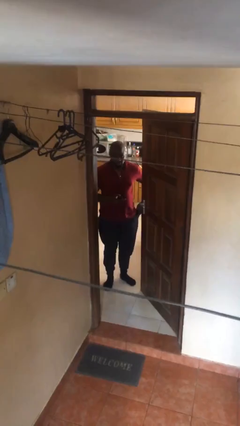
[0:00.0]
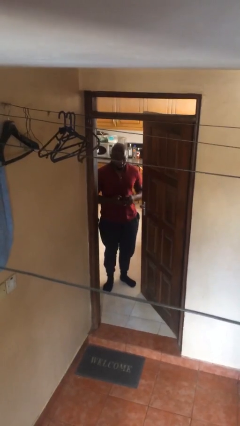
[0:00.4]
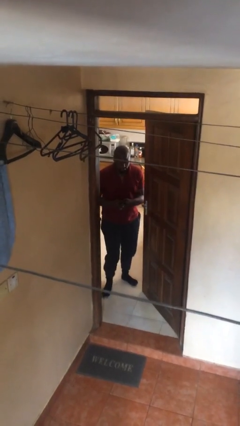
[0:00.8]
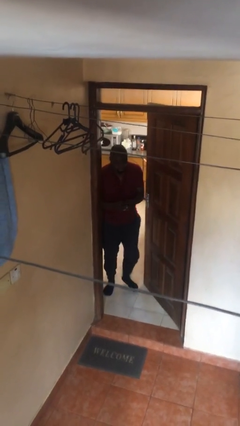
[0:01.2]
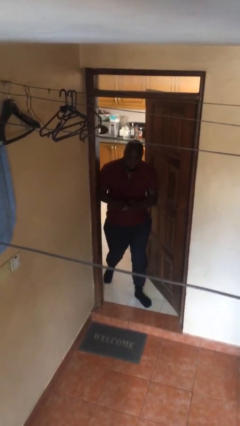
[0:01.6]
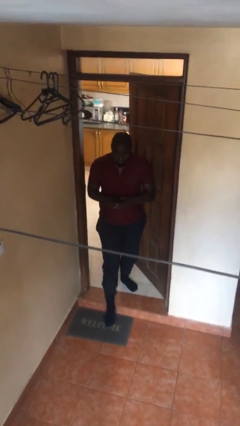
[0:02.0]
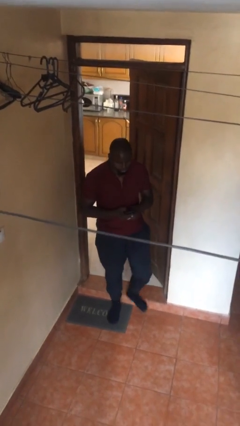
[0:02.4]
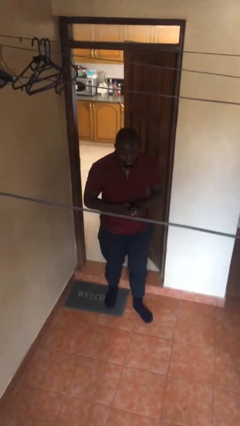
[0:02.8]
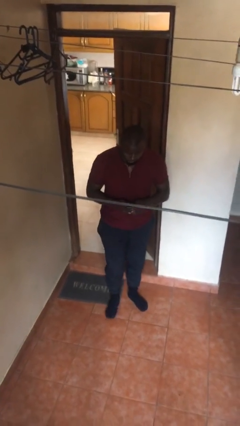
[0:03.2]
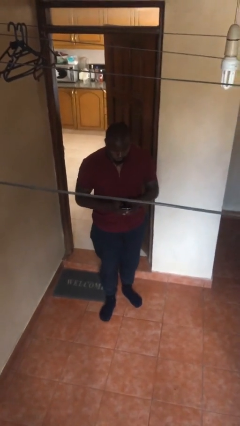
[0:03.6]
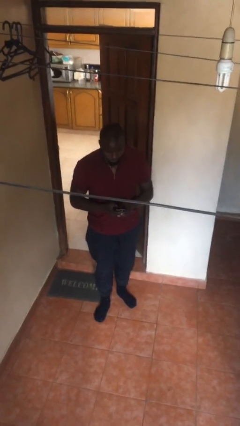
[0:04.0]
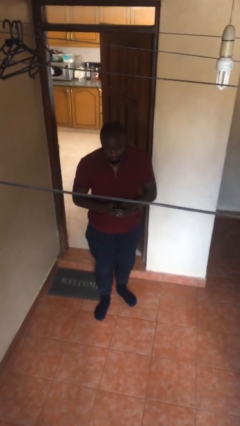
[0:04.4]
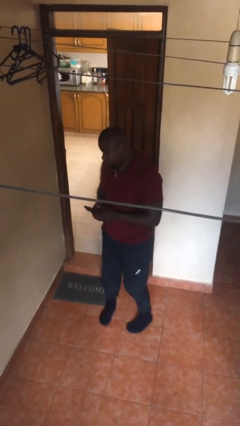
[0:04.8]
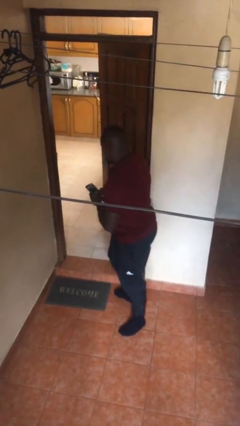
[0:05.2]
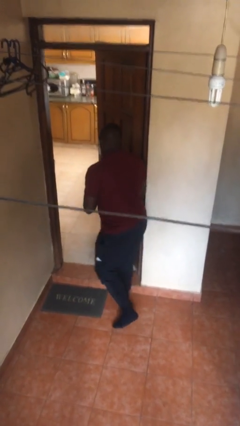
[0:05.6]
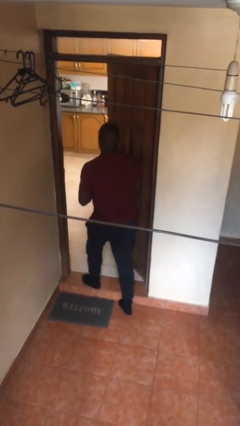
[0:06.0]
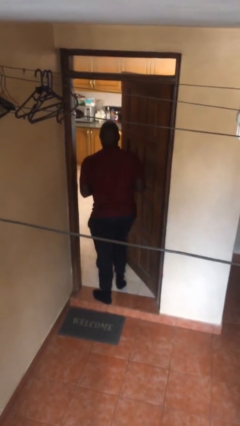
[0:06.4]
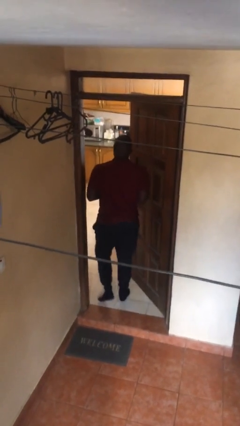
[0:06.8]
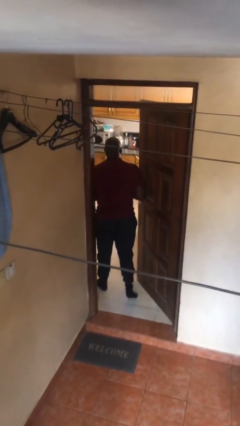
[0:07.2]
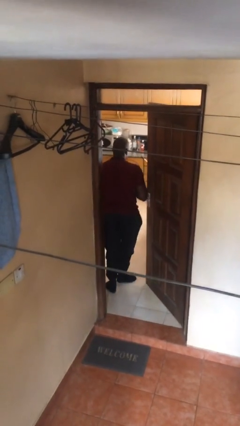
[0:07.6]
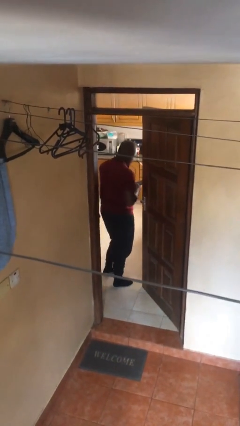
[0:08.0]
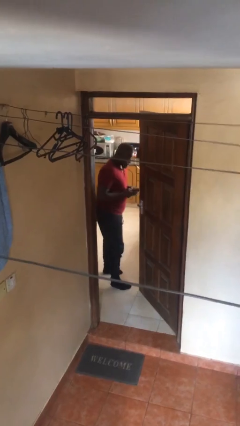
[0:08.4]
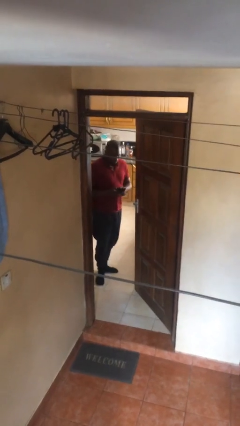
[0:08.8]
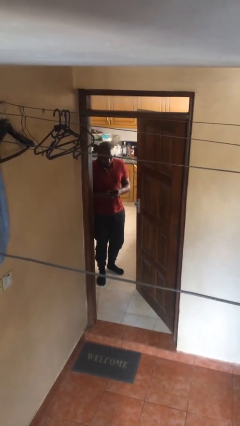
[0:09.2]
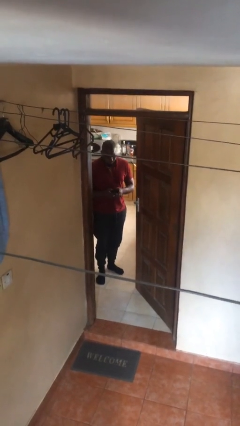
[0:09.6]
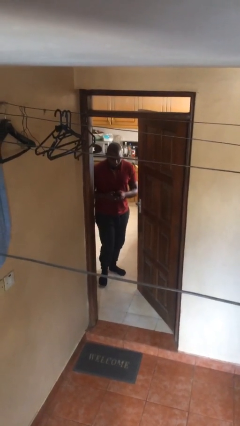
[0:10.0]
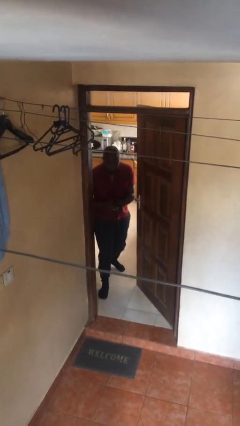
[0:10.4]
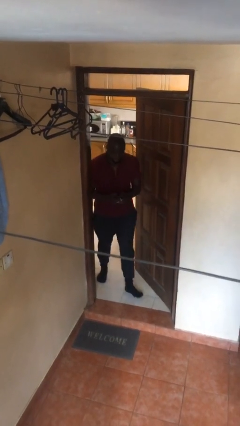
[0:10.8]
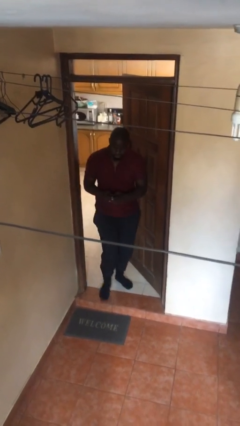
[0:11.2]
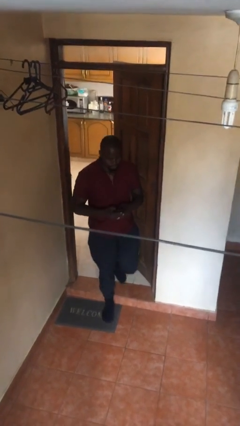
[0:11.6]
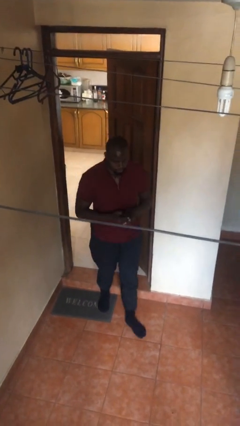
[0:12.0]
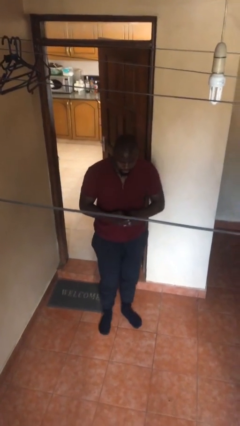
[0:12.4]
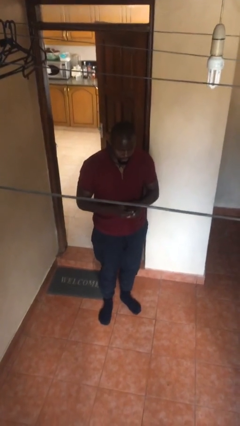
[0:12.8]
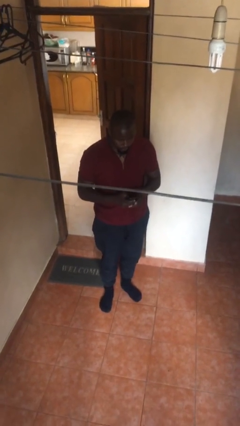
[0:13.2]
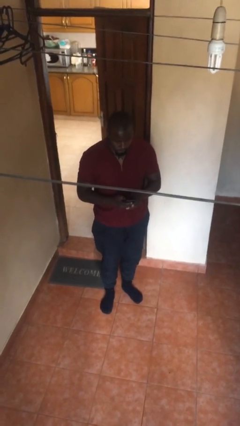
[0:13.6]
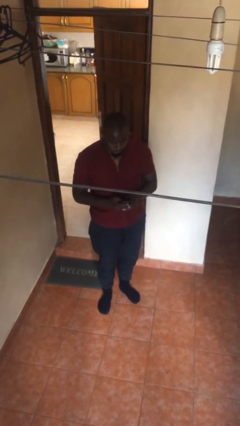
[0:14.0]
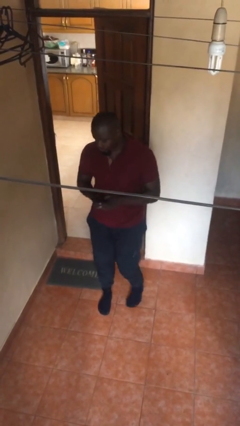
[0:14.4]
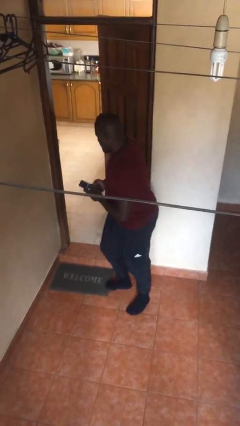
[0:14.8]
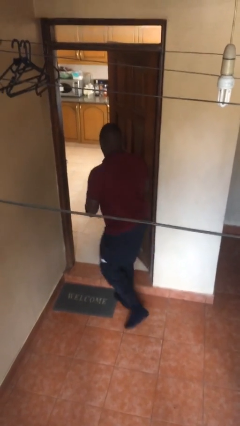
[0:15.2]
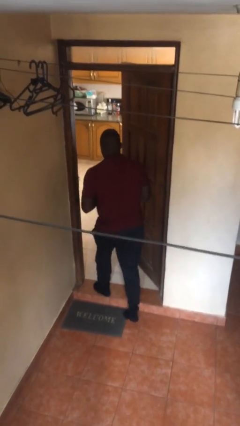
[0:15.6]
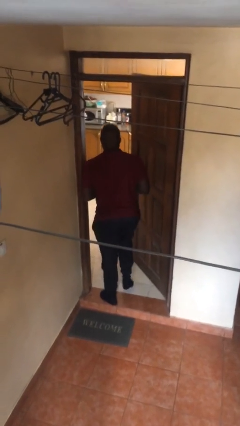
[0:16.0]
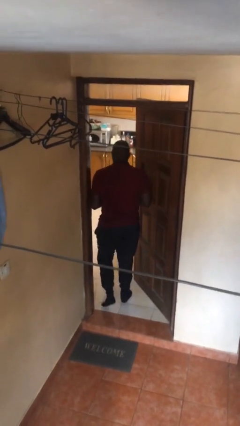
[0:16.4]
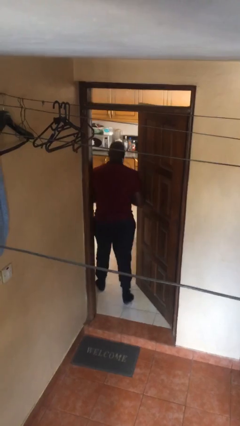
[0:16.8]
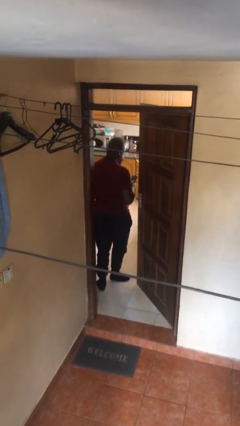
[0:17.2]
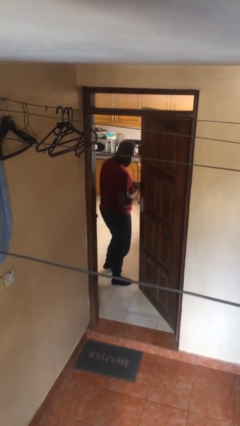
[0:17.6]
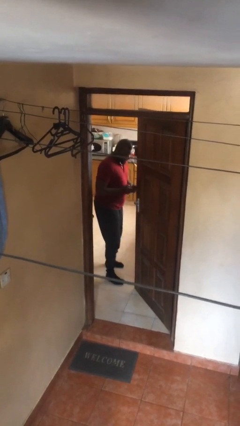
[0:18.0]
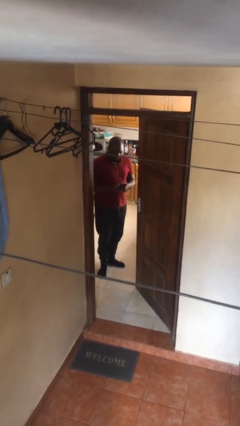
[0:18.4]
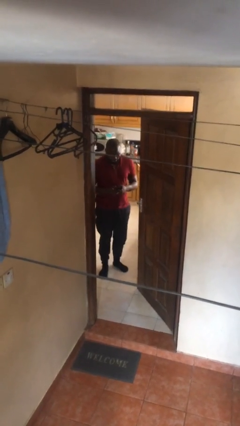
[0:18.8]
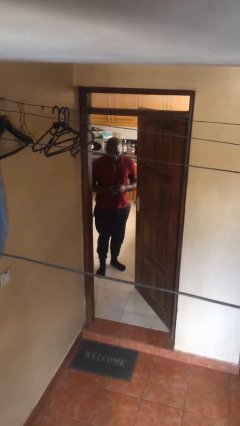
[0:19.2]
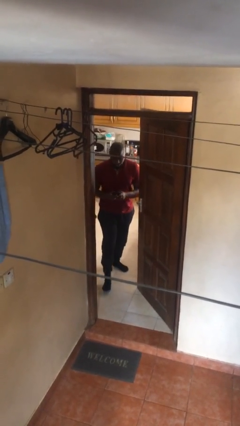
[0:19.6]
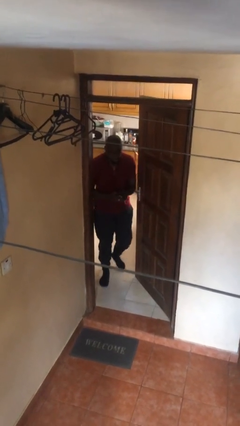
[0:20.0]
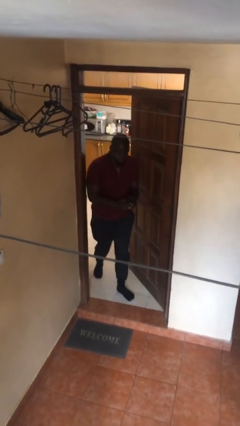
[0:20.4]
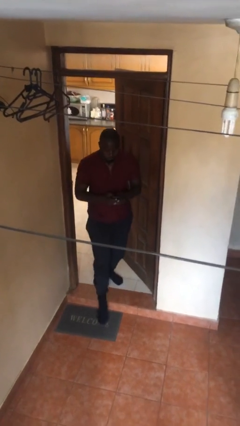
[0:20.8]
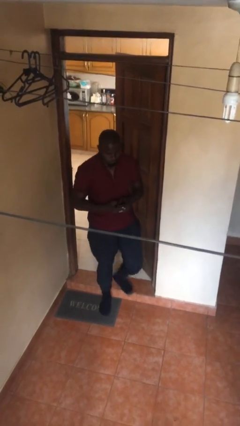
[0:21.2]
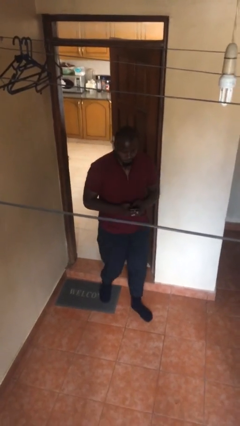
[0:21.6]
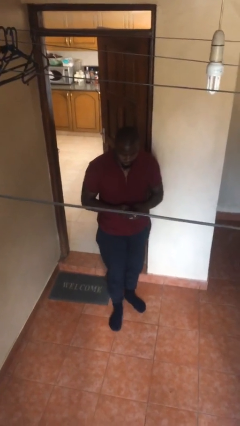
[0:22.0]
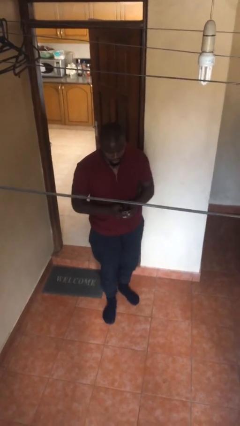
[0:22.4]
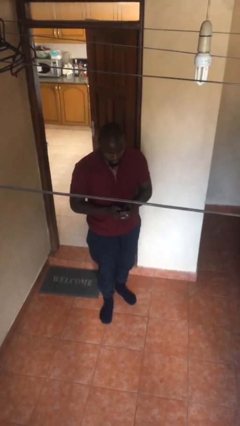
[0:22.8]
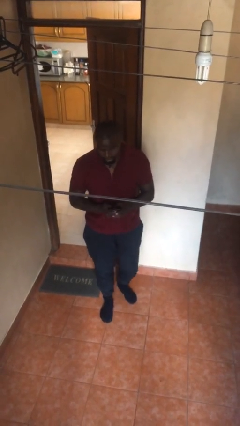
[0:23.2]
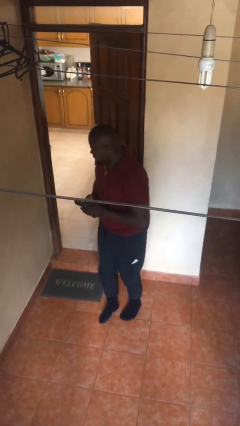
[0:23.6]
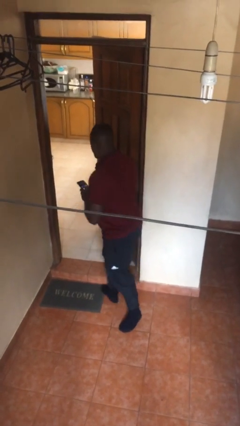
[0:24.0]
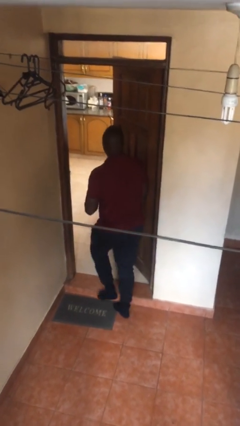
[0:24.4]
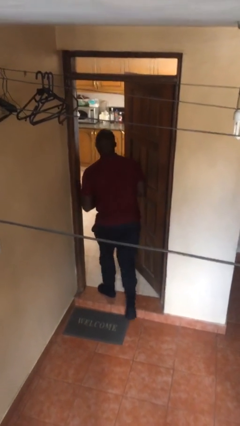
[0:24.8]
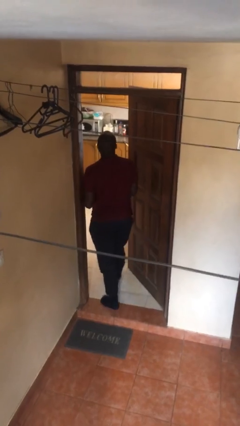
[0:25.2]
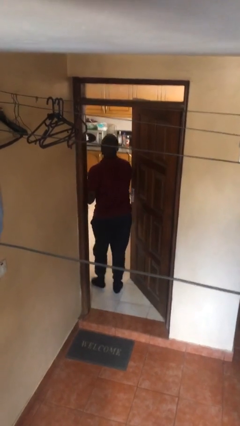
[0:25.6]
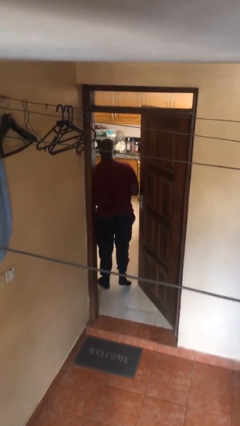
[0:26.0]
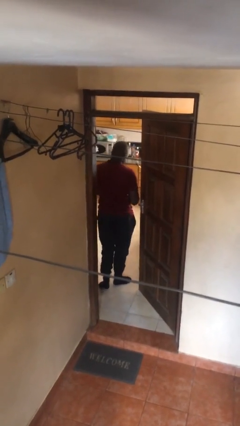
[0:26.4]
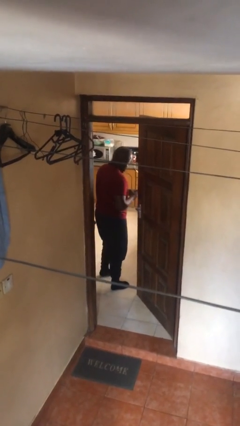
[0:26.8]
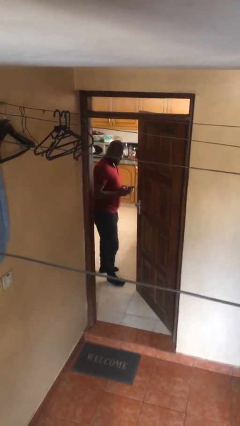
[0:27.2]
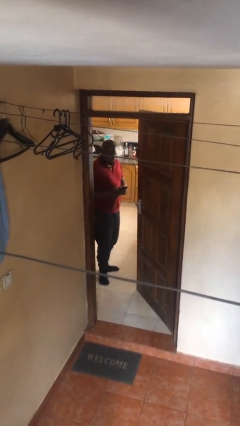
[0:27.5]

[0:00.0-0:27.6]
person texts on phone

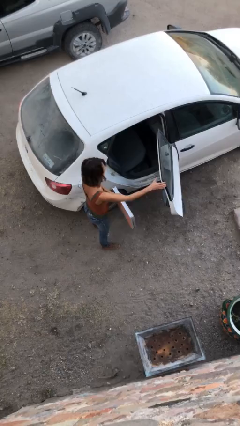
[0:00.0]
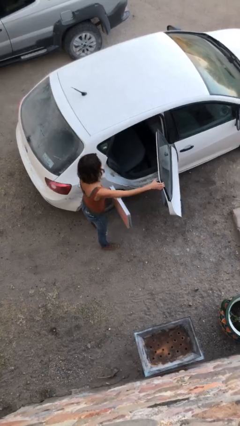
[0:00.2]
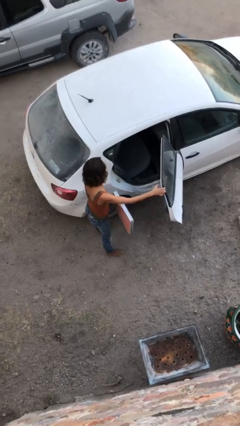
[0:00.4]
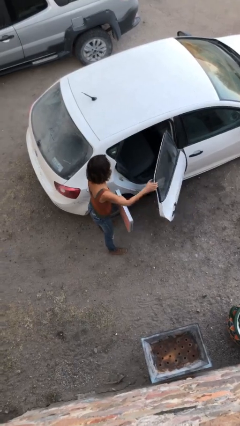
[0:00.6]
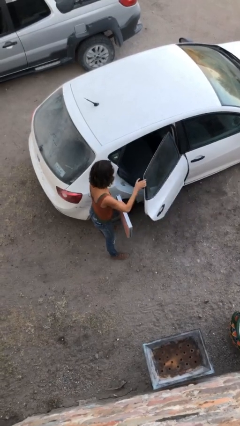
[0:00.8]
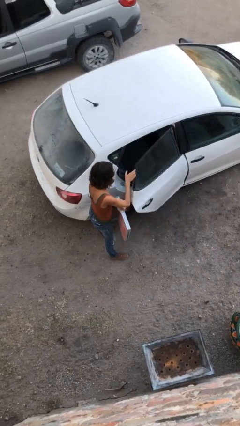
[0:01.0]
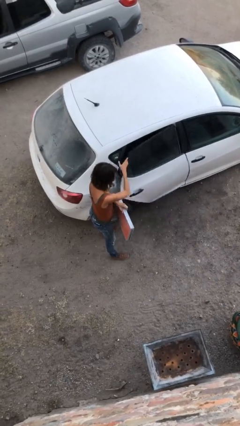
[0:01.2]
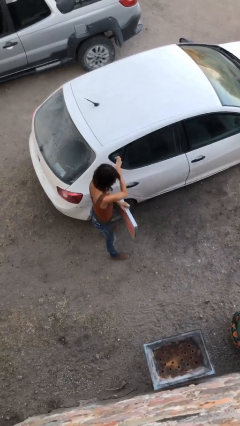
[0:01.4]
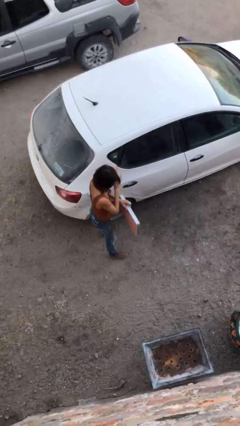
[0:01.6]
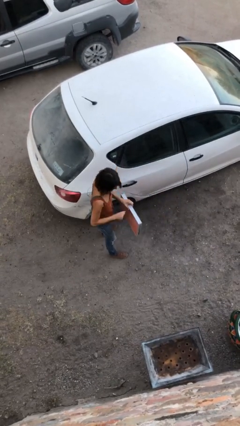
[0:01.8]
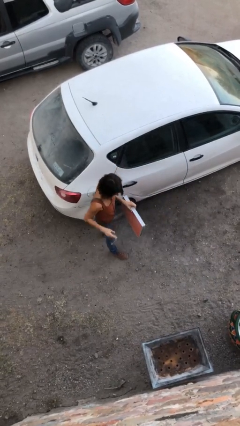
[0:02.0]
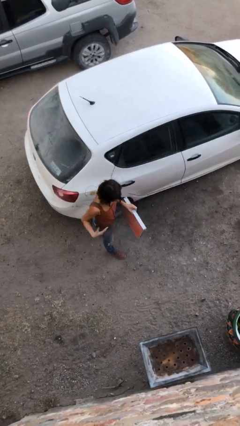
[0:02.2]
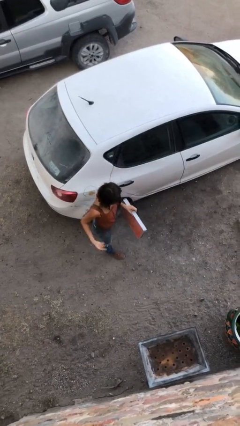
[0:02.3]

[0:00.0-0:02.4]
person closes car door

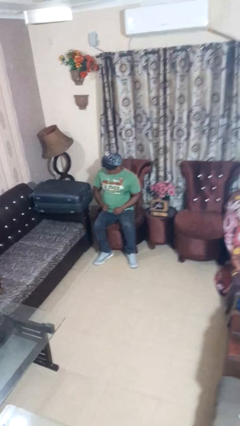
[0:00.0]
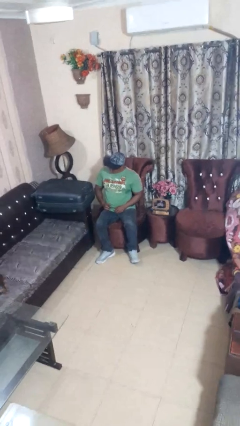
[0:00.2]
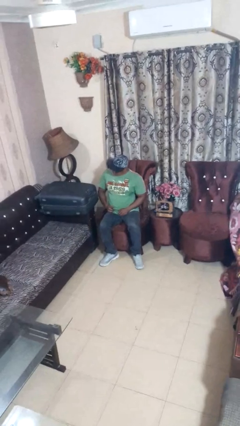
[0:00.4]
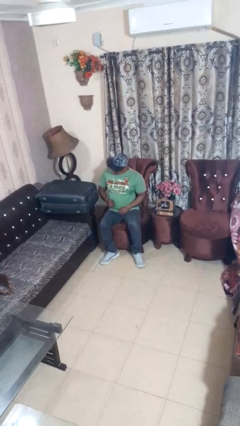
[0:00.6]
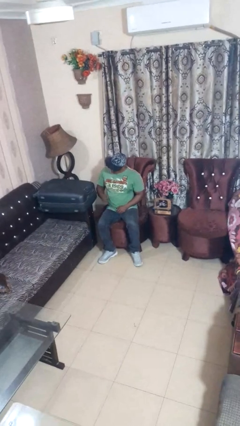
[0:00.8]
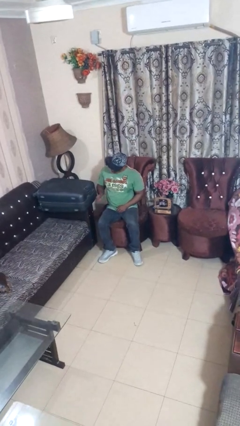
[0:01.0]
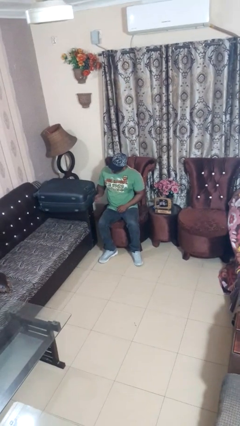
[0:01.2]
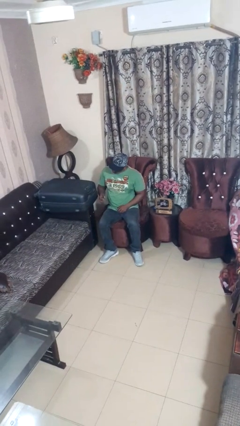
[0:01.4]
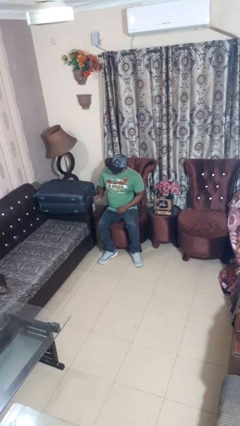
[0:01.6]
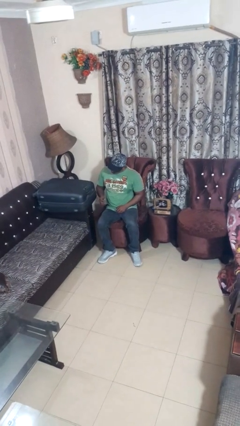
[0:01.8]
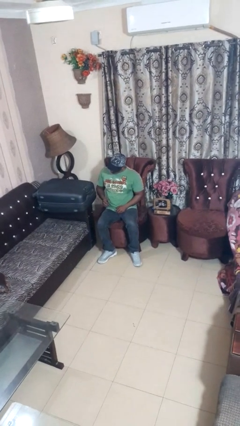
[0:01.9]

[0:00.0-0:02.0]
person taps object with finger
